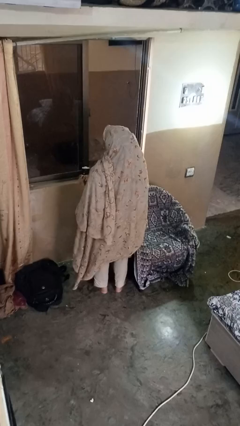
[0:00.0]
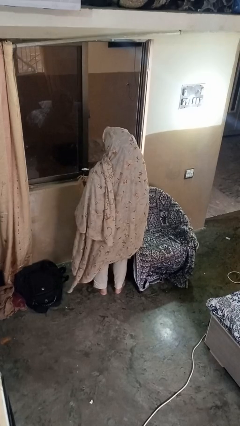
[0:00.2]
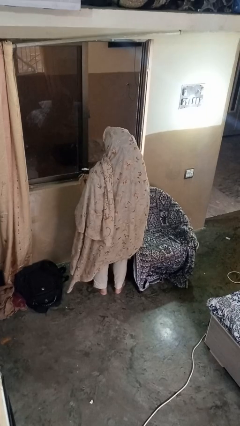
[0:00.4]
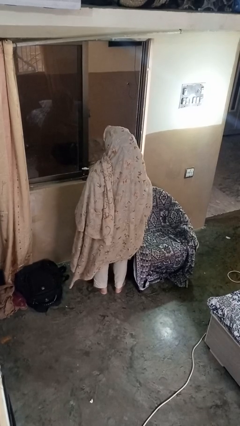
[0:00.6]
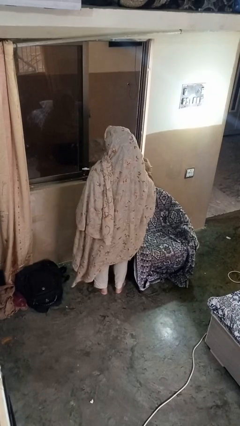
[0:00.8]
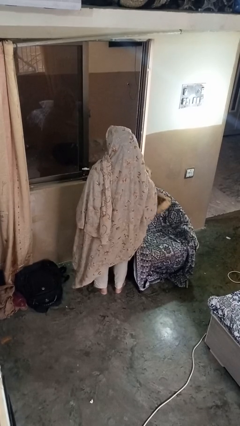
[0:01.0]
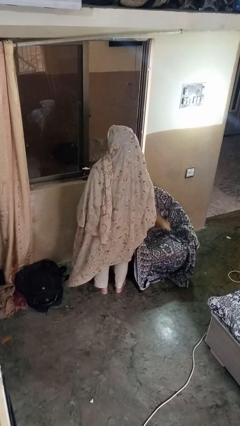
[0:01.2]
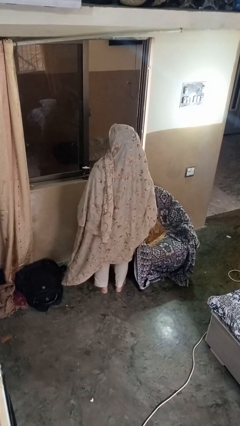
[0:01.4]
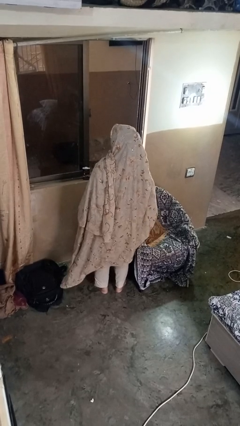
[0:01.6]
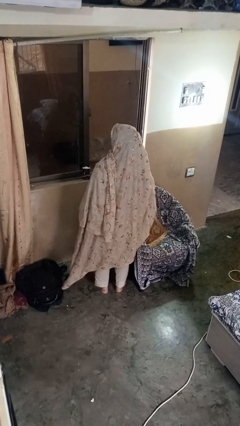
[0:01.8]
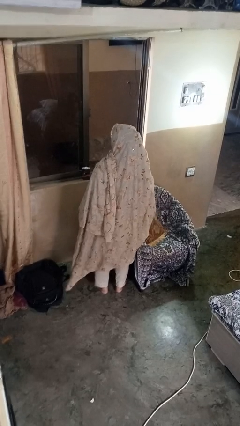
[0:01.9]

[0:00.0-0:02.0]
person puts down object on couch

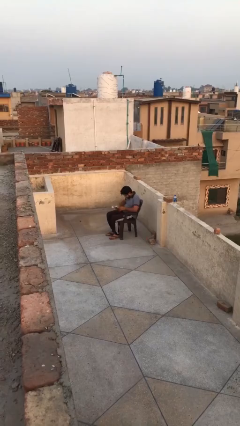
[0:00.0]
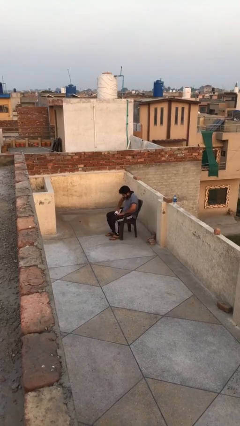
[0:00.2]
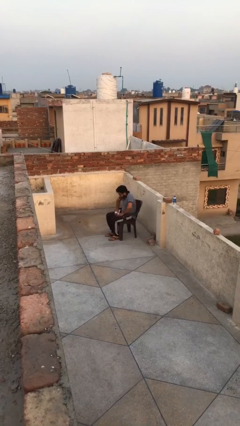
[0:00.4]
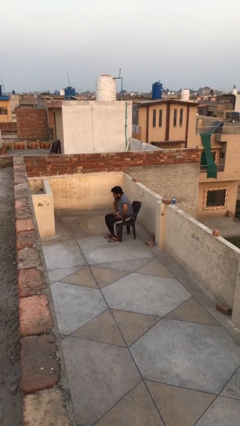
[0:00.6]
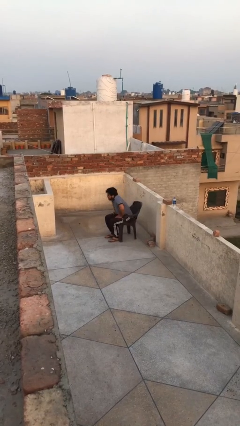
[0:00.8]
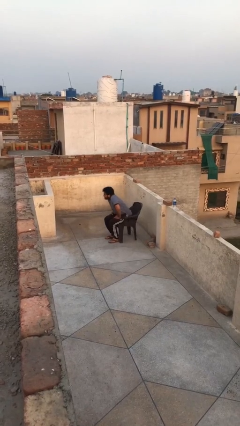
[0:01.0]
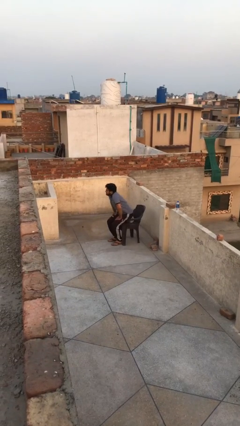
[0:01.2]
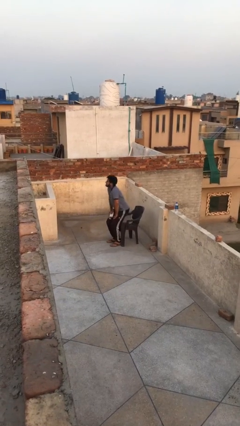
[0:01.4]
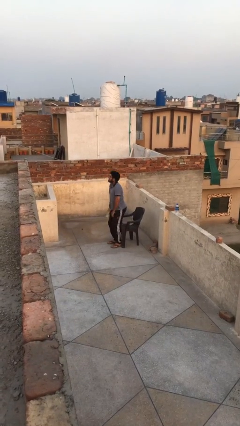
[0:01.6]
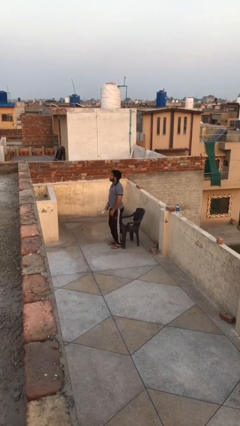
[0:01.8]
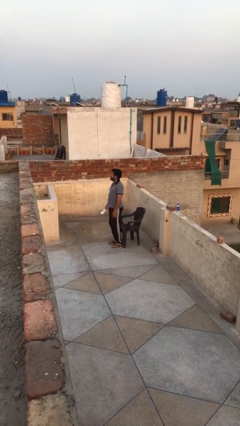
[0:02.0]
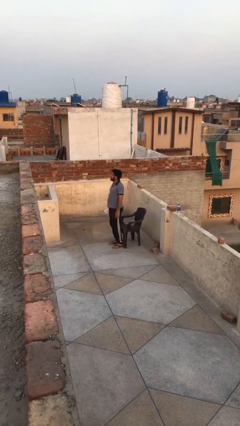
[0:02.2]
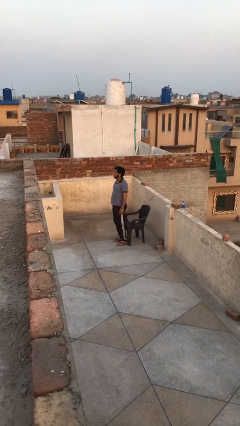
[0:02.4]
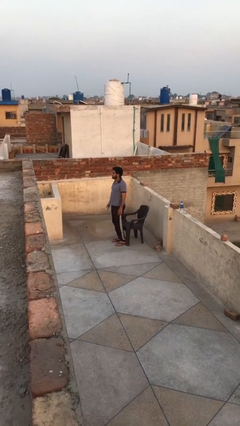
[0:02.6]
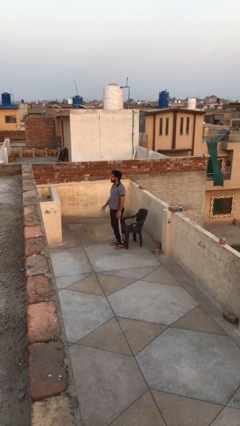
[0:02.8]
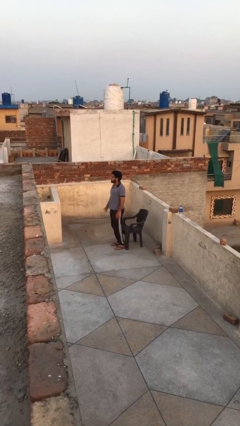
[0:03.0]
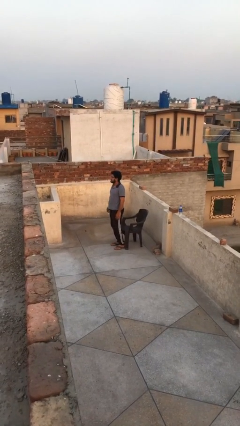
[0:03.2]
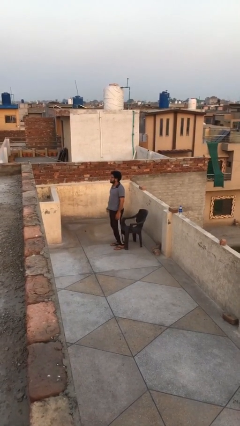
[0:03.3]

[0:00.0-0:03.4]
person stands up

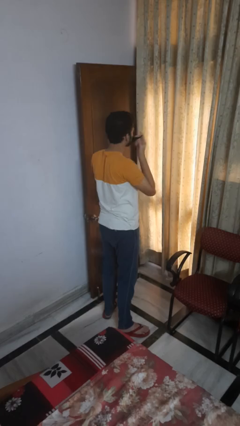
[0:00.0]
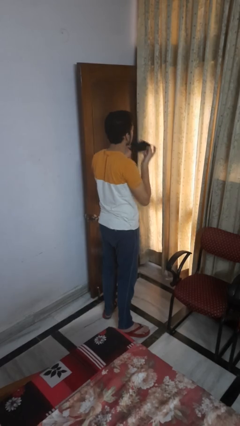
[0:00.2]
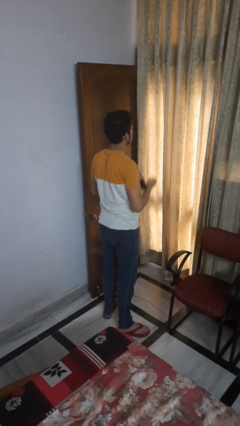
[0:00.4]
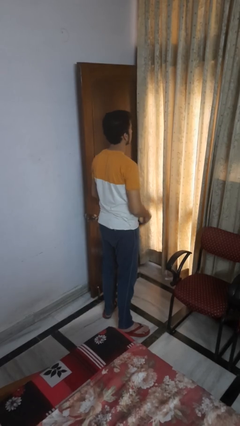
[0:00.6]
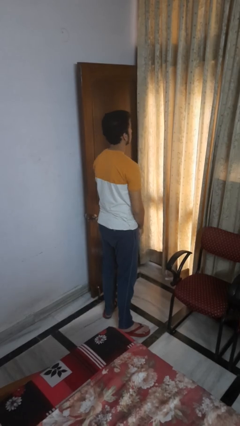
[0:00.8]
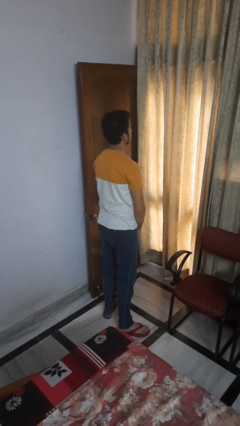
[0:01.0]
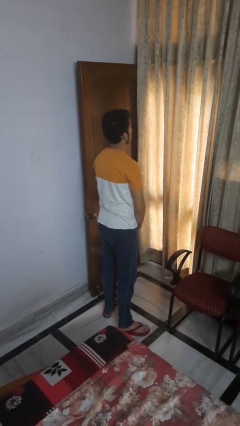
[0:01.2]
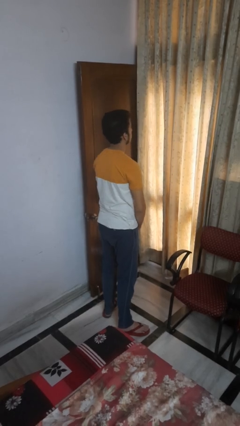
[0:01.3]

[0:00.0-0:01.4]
person takes off facemask

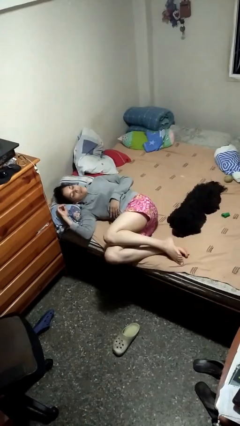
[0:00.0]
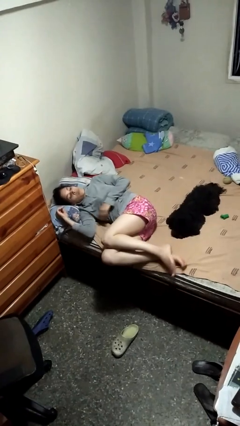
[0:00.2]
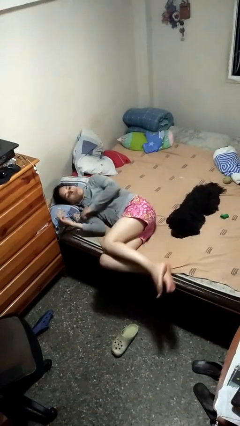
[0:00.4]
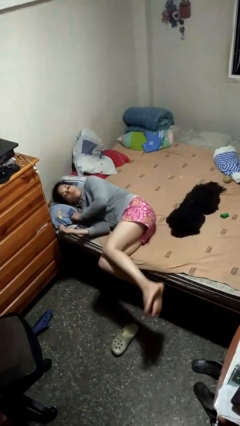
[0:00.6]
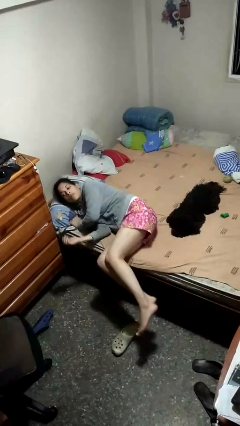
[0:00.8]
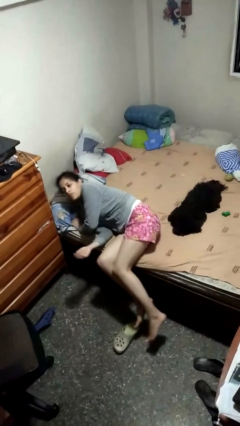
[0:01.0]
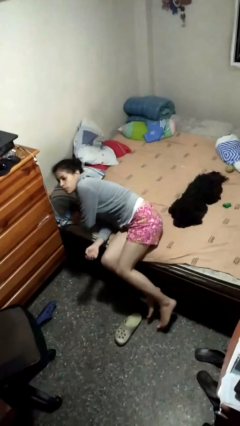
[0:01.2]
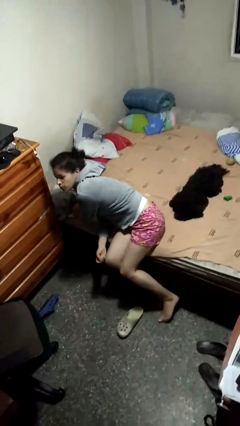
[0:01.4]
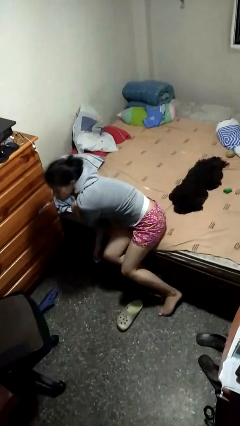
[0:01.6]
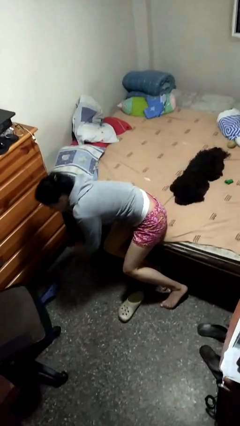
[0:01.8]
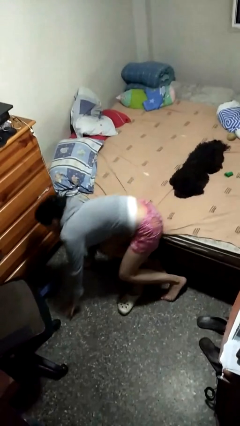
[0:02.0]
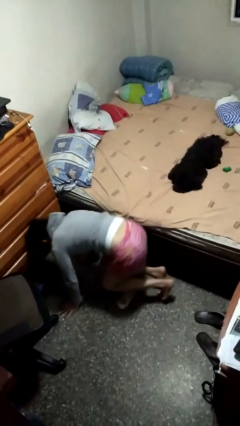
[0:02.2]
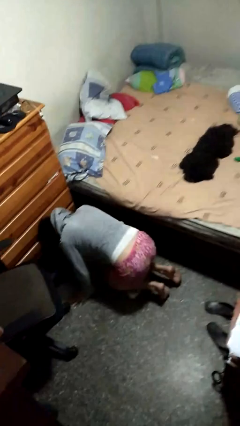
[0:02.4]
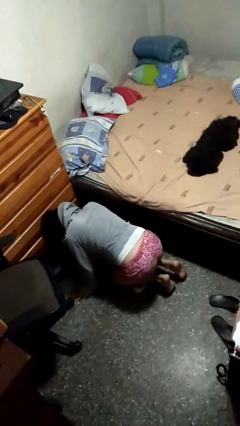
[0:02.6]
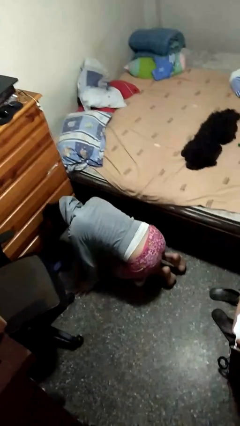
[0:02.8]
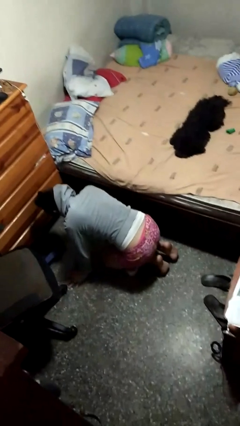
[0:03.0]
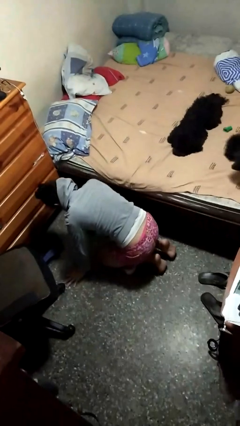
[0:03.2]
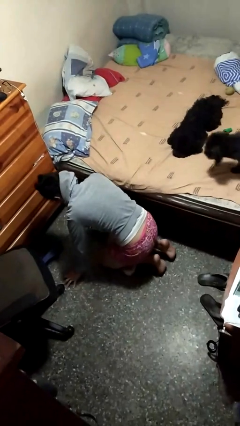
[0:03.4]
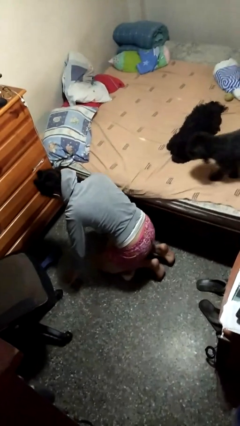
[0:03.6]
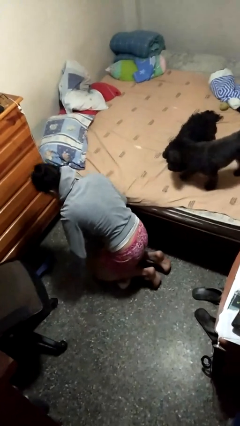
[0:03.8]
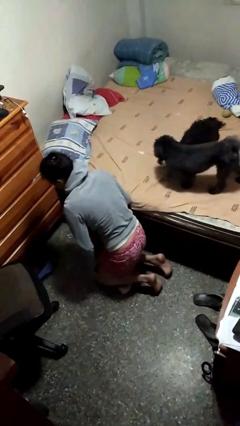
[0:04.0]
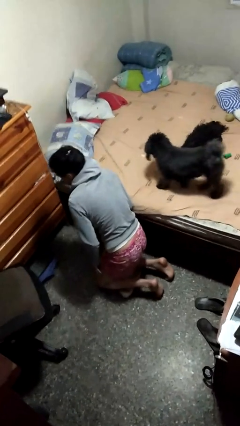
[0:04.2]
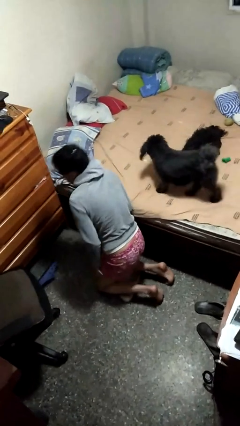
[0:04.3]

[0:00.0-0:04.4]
person falls from bed

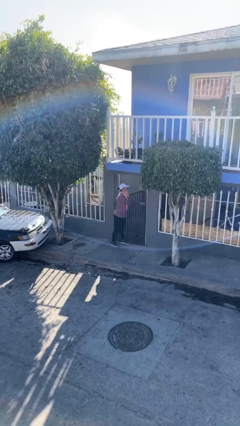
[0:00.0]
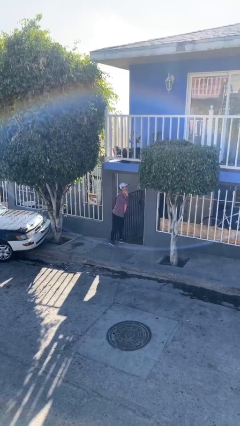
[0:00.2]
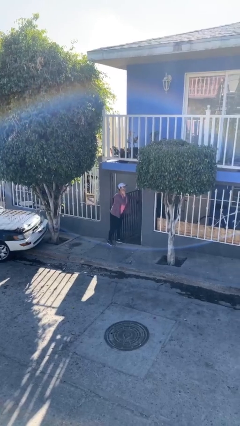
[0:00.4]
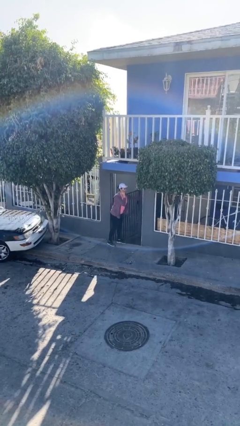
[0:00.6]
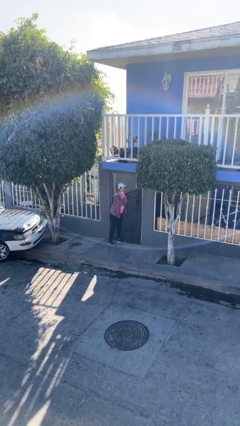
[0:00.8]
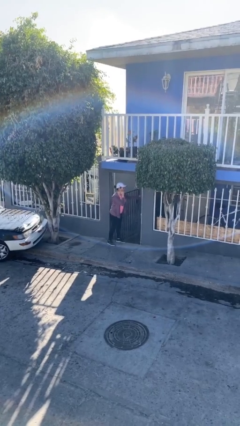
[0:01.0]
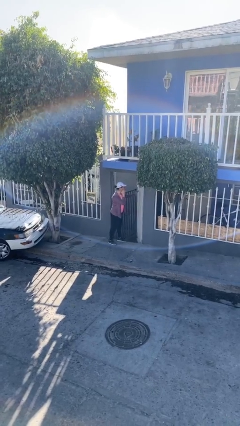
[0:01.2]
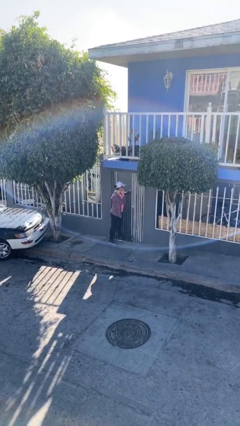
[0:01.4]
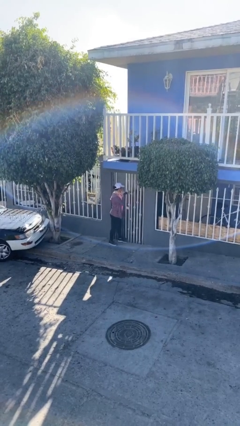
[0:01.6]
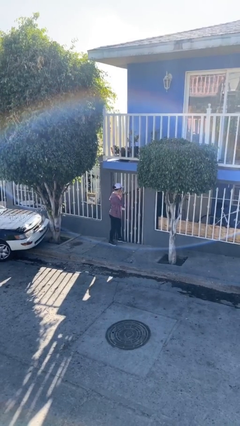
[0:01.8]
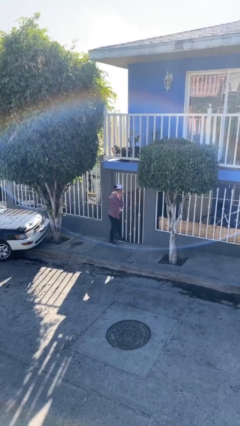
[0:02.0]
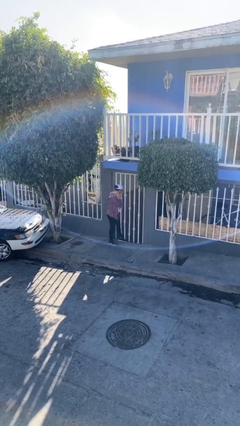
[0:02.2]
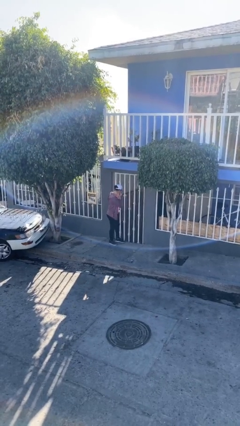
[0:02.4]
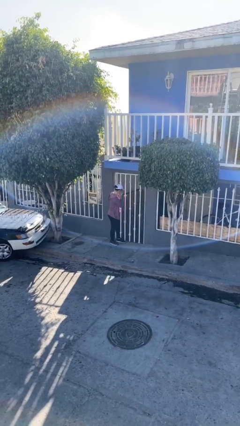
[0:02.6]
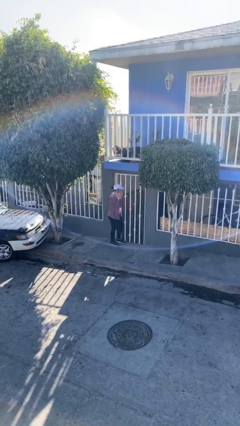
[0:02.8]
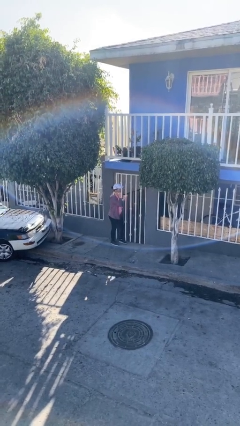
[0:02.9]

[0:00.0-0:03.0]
person closes facility door

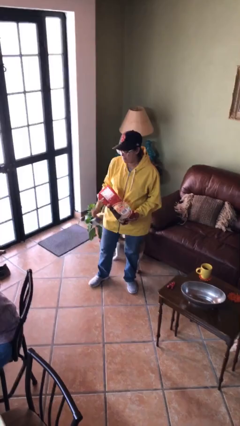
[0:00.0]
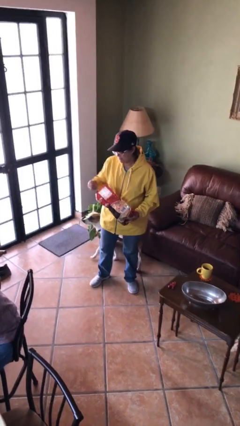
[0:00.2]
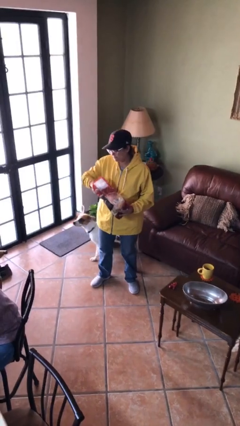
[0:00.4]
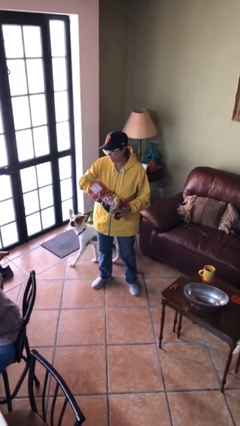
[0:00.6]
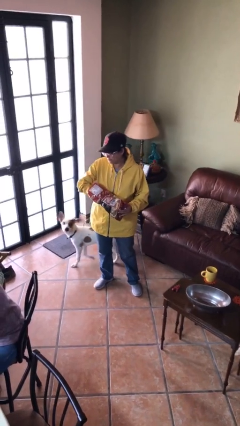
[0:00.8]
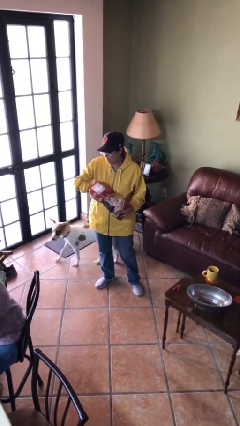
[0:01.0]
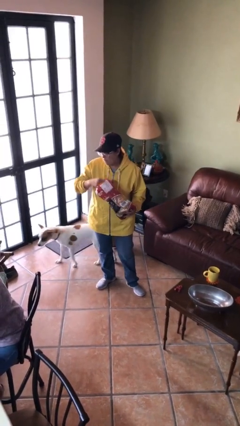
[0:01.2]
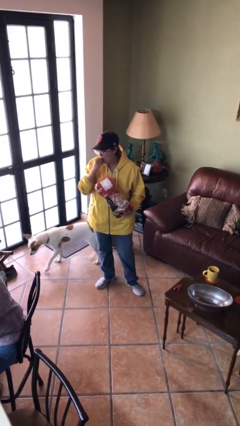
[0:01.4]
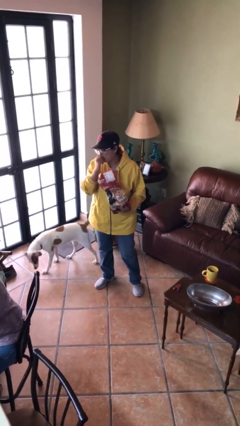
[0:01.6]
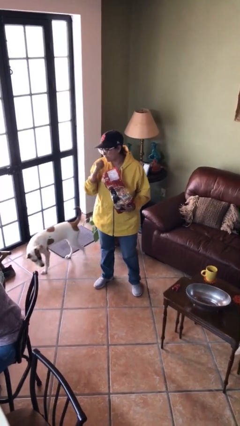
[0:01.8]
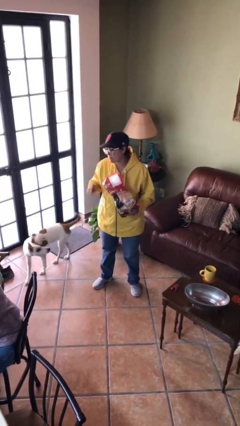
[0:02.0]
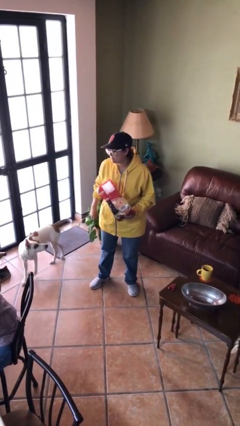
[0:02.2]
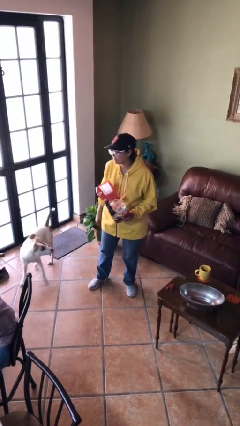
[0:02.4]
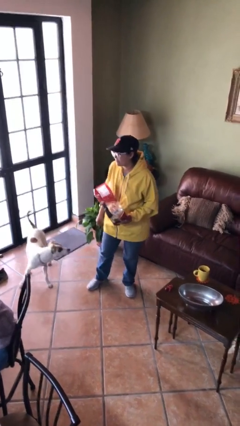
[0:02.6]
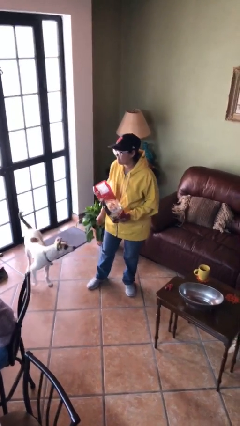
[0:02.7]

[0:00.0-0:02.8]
person eats snack from bag

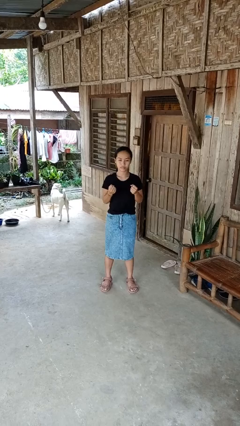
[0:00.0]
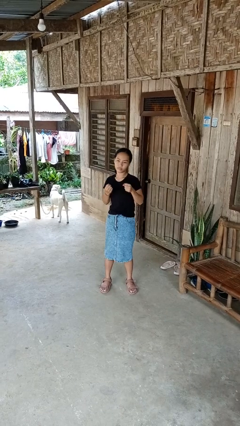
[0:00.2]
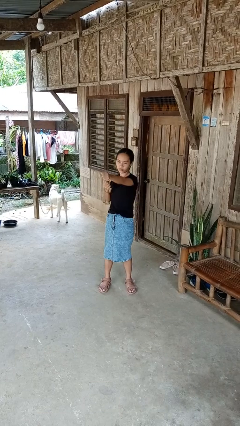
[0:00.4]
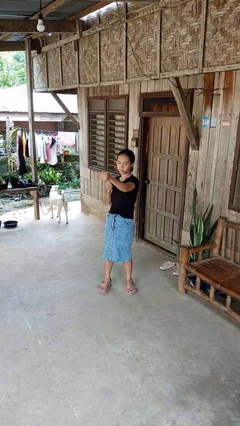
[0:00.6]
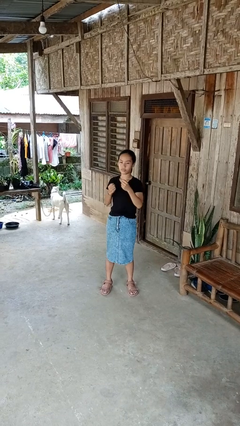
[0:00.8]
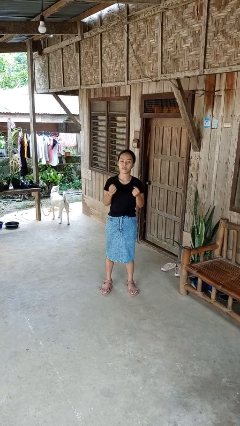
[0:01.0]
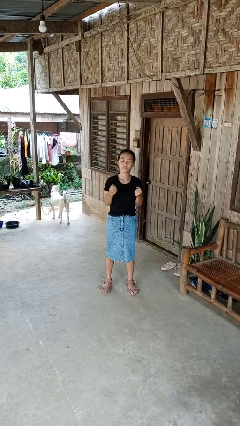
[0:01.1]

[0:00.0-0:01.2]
person punches
